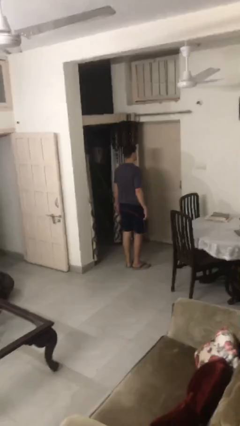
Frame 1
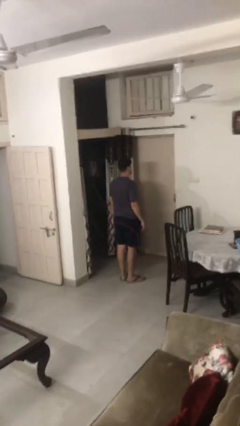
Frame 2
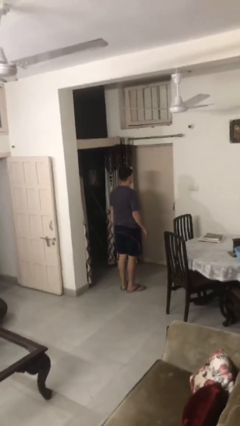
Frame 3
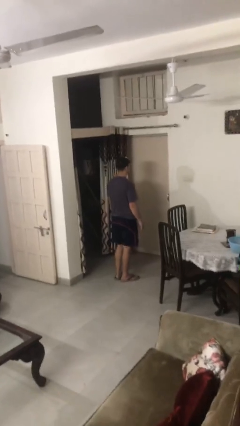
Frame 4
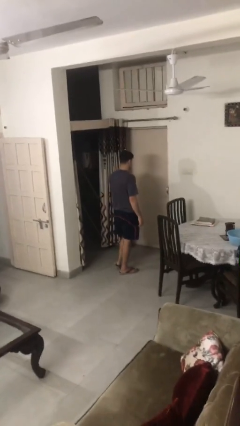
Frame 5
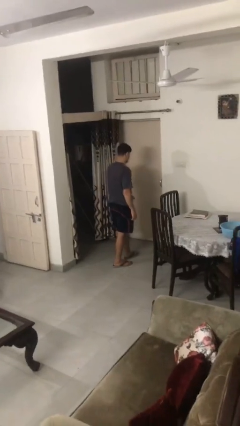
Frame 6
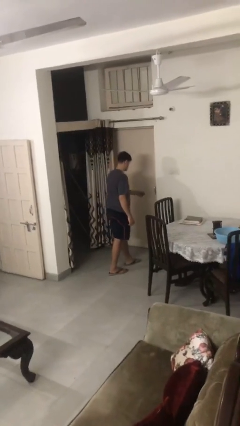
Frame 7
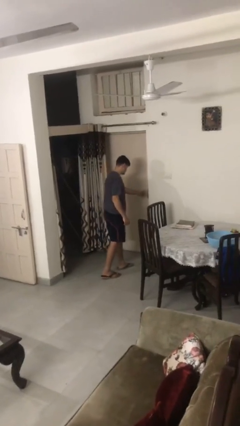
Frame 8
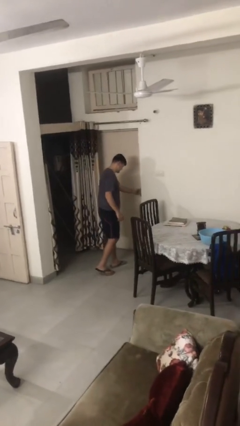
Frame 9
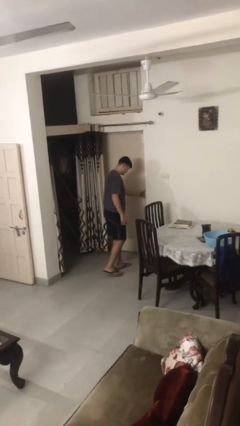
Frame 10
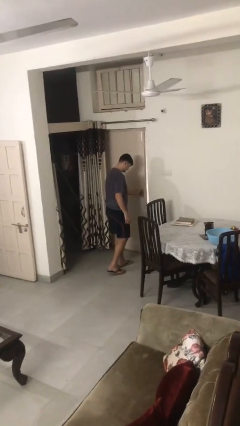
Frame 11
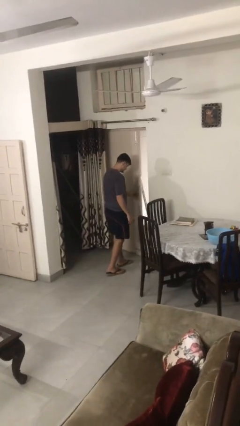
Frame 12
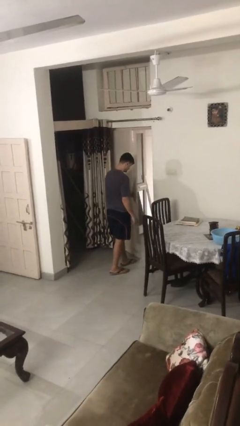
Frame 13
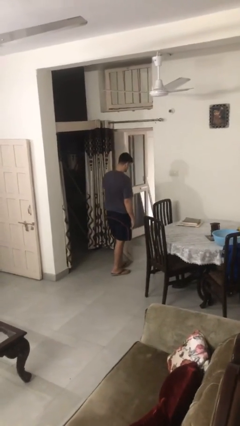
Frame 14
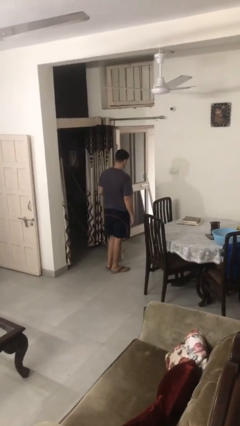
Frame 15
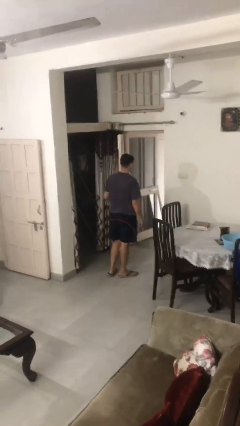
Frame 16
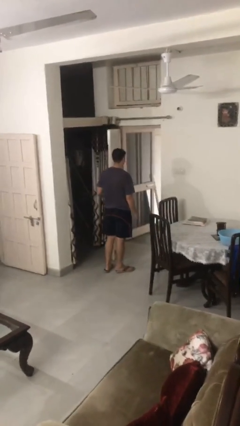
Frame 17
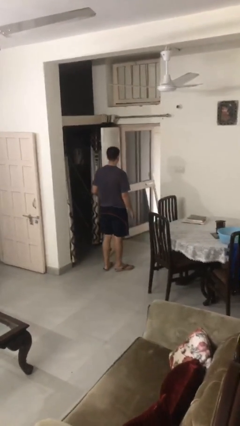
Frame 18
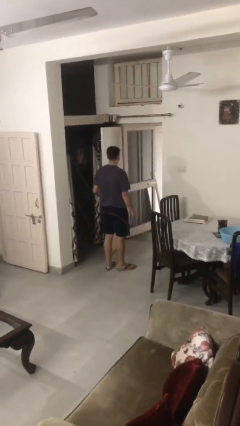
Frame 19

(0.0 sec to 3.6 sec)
person opens facility door

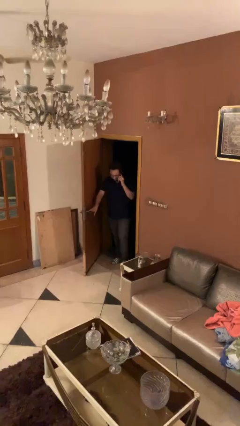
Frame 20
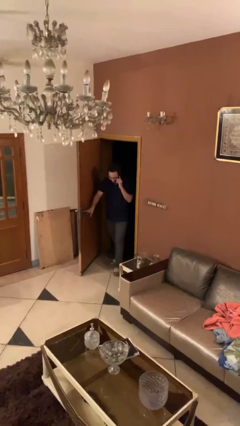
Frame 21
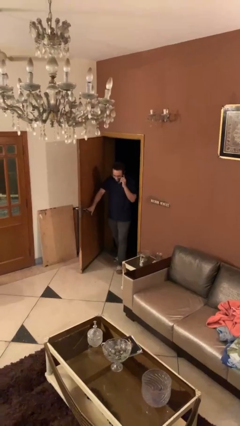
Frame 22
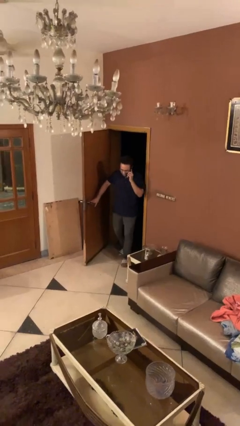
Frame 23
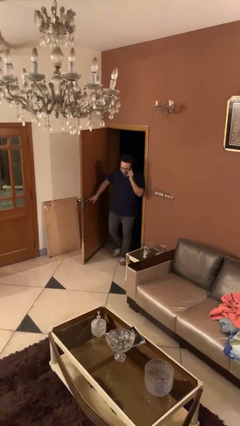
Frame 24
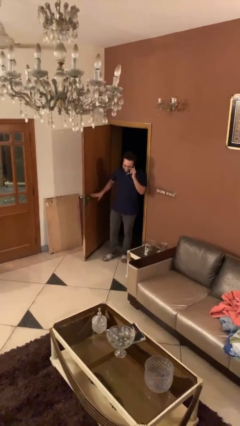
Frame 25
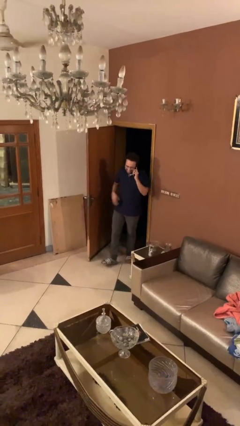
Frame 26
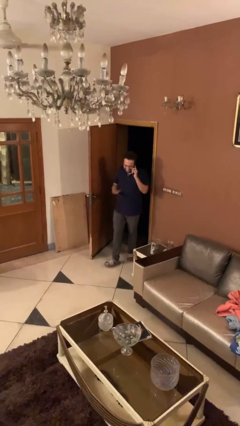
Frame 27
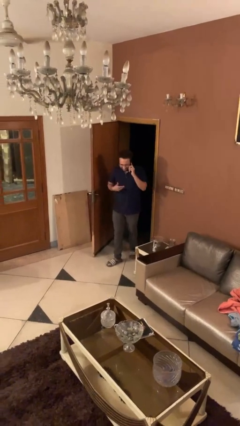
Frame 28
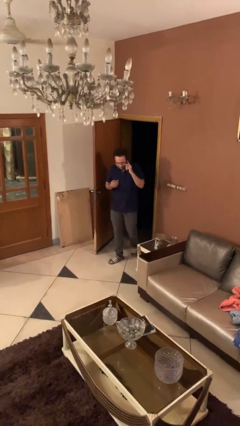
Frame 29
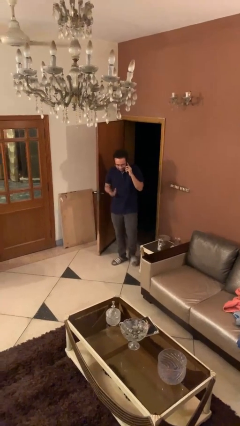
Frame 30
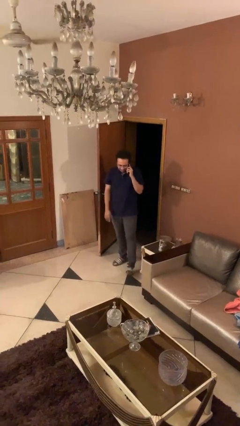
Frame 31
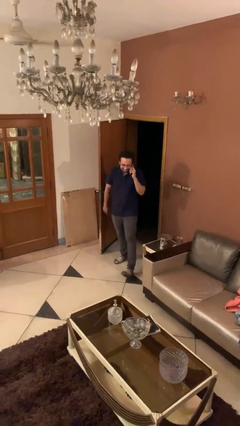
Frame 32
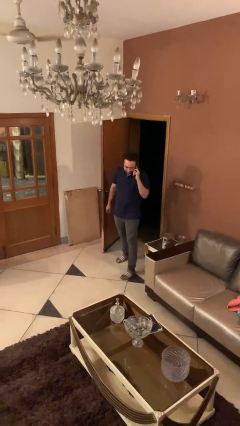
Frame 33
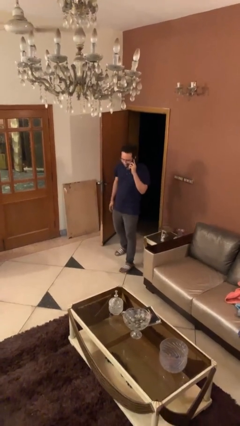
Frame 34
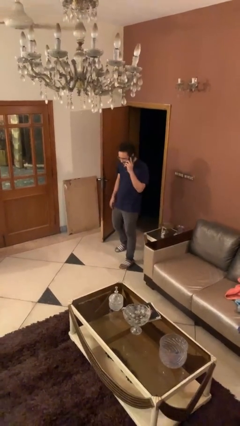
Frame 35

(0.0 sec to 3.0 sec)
person enters scene through structure

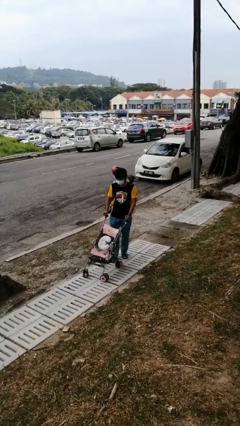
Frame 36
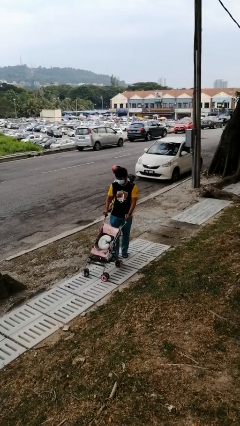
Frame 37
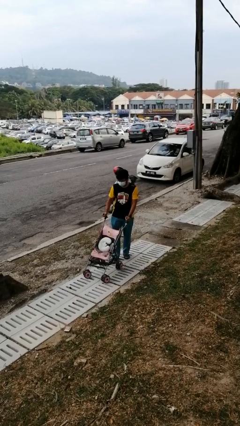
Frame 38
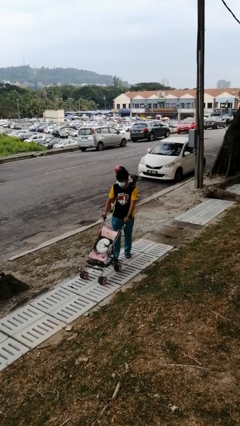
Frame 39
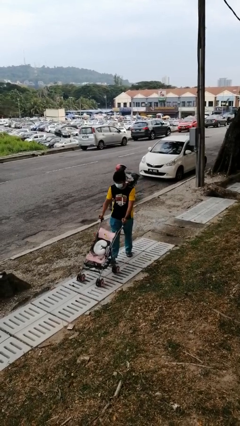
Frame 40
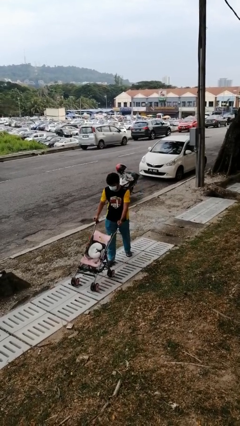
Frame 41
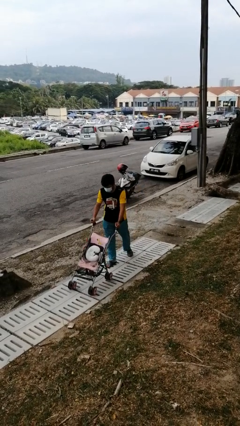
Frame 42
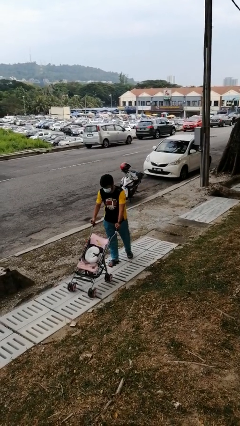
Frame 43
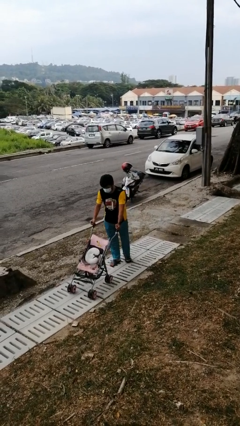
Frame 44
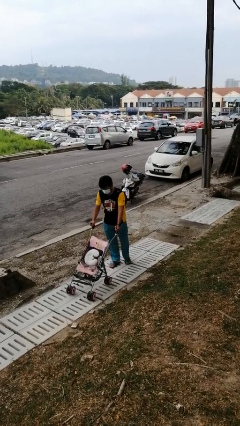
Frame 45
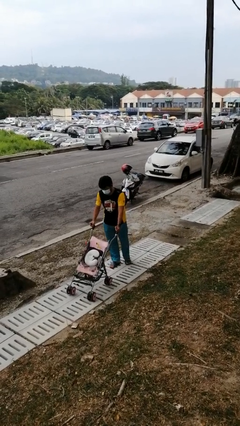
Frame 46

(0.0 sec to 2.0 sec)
person pushes wheeled cart

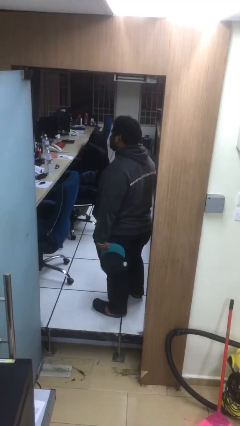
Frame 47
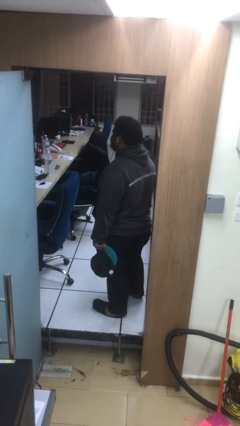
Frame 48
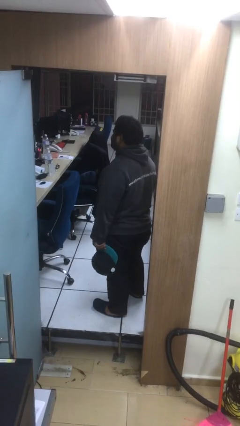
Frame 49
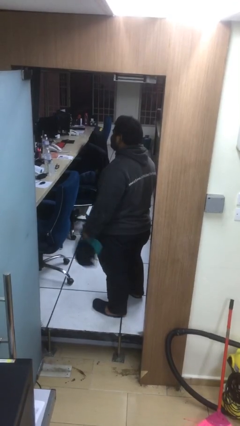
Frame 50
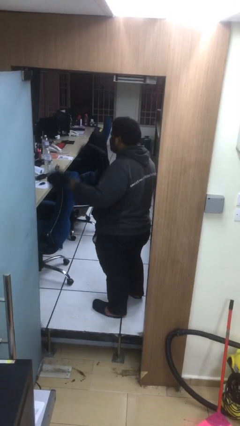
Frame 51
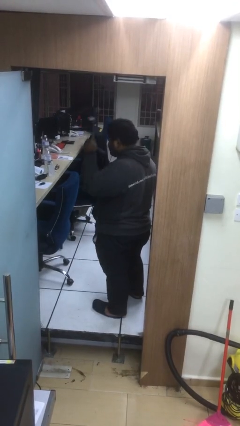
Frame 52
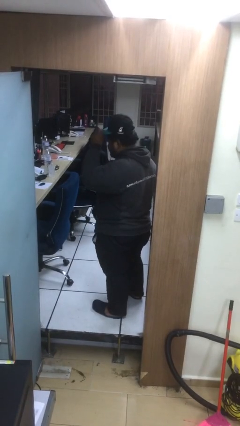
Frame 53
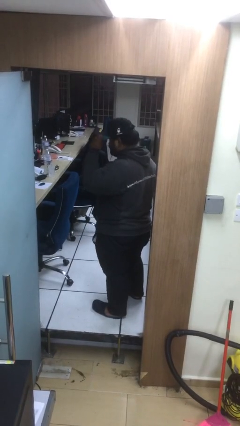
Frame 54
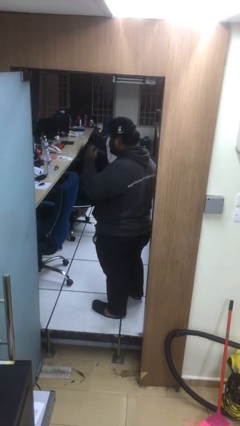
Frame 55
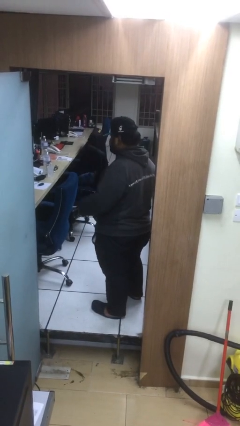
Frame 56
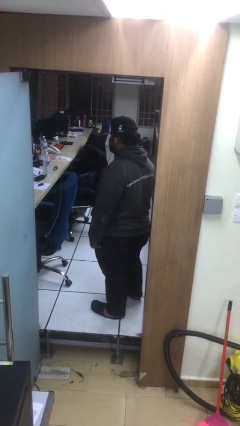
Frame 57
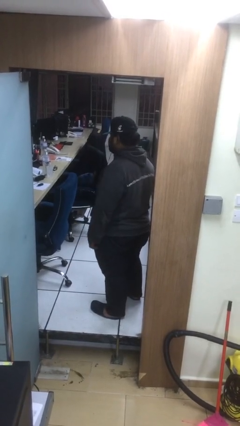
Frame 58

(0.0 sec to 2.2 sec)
person puts on hat

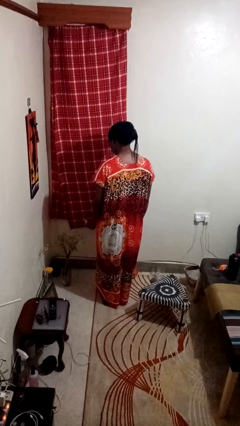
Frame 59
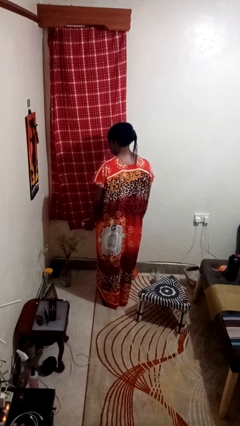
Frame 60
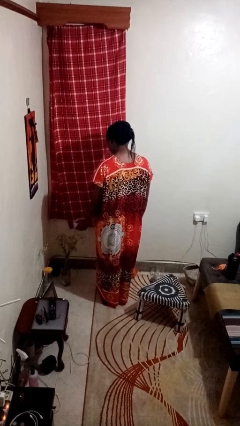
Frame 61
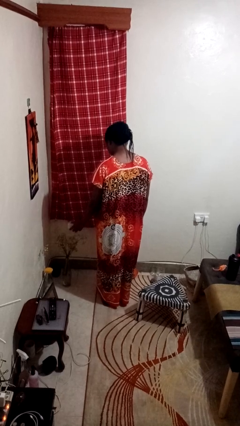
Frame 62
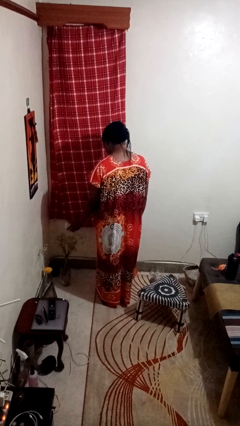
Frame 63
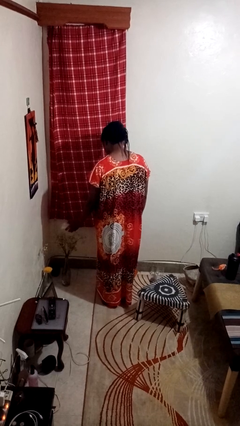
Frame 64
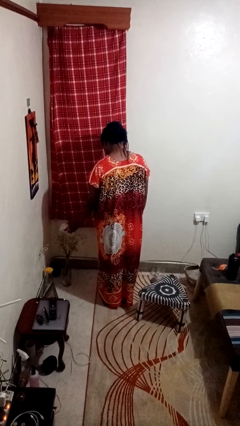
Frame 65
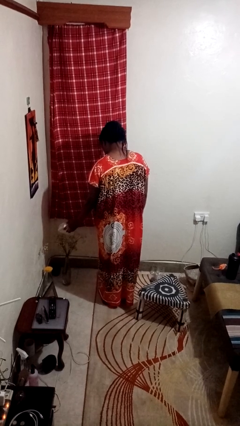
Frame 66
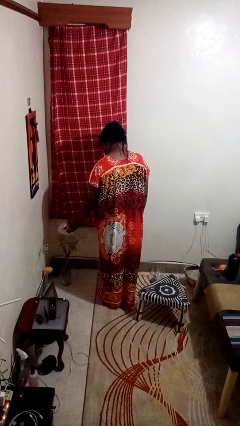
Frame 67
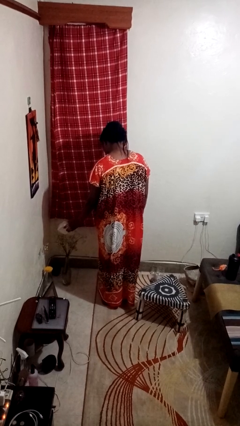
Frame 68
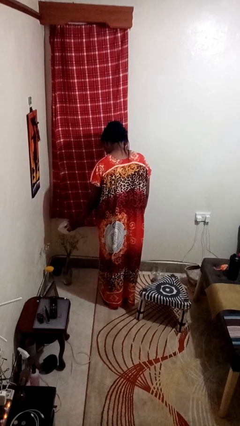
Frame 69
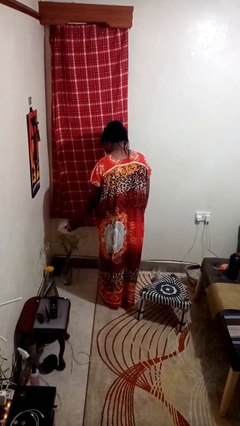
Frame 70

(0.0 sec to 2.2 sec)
person waters houseplant

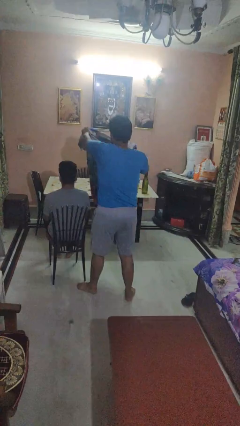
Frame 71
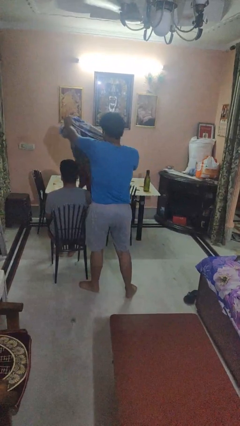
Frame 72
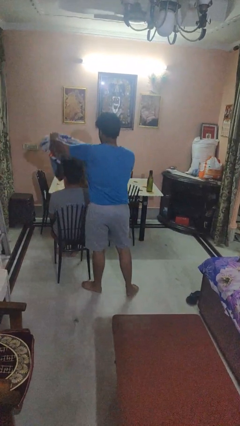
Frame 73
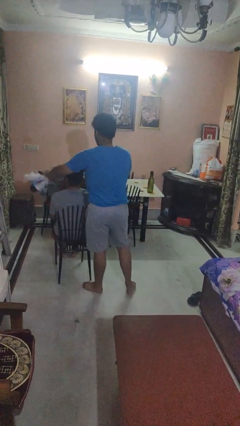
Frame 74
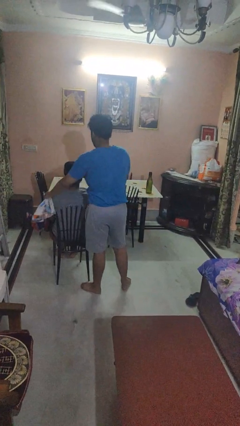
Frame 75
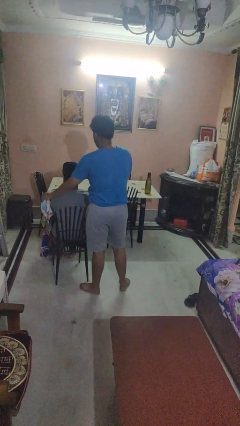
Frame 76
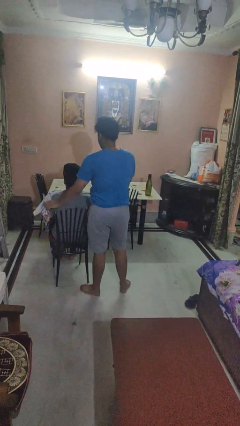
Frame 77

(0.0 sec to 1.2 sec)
person covers friend with blanket

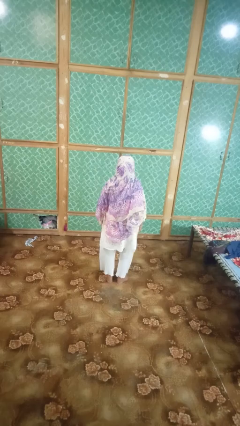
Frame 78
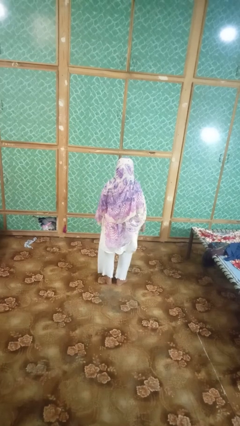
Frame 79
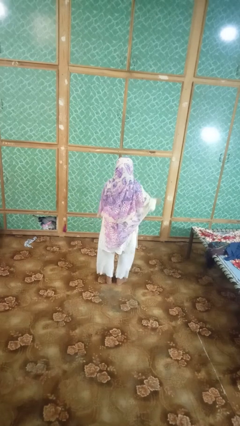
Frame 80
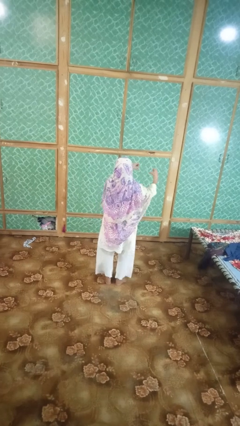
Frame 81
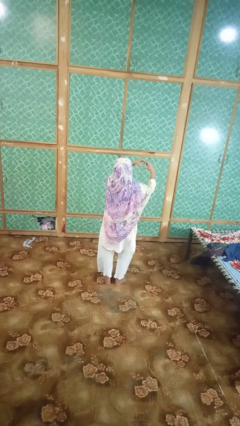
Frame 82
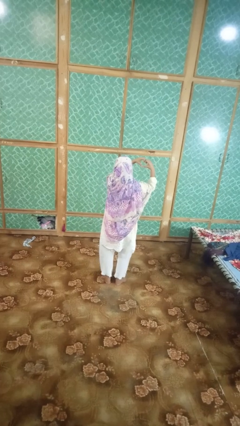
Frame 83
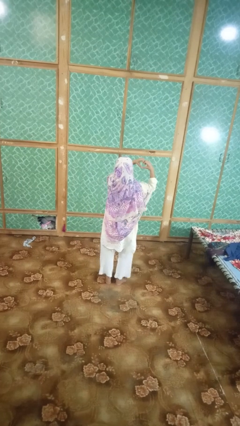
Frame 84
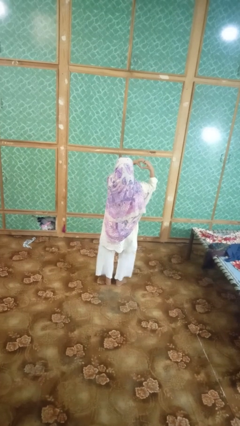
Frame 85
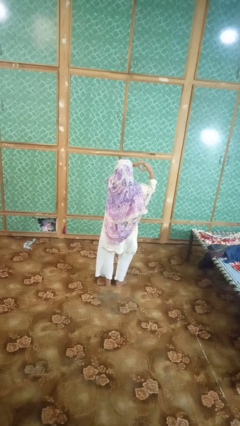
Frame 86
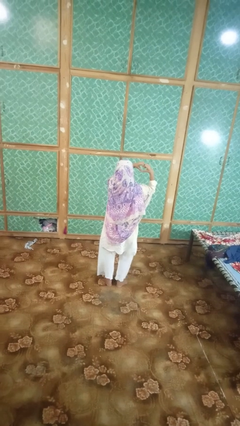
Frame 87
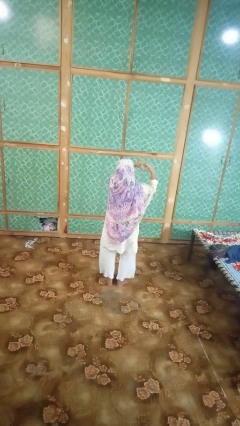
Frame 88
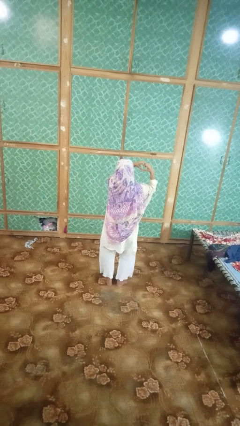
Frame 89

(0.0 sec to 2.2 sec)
person gestures heart

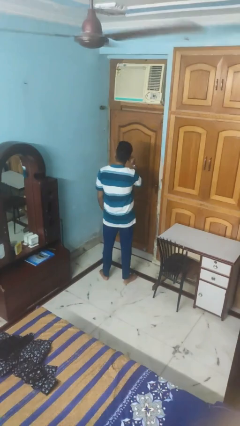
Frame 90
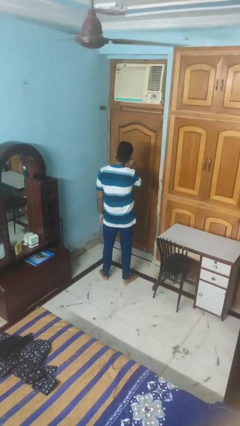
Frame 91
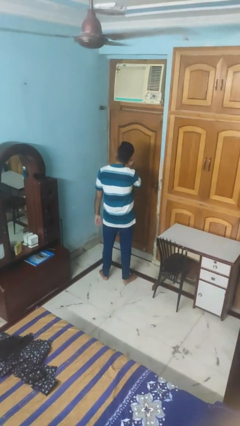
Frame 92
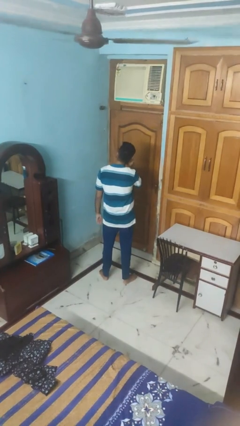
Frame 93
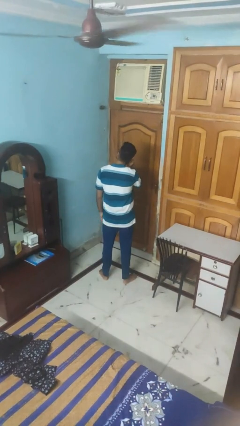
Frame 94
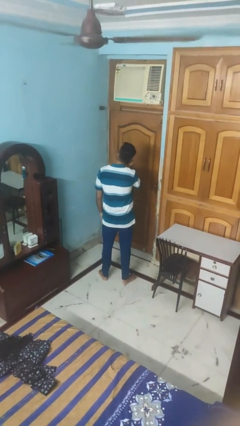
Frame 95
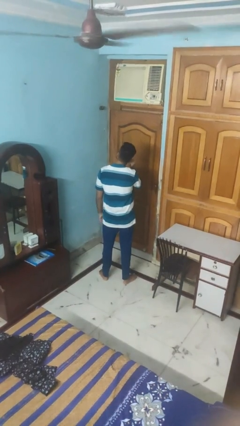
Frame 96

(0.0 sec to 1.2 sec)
person touches earlobe
